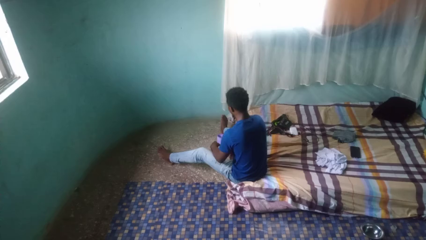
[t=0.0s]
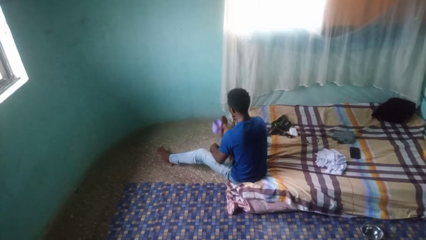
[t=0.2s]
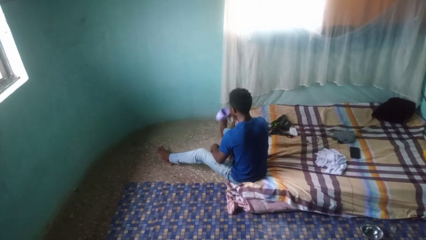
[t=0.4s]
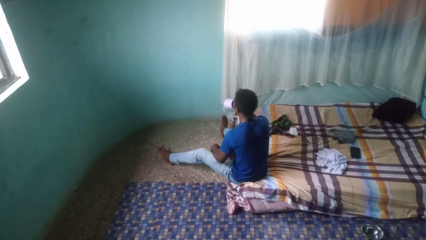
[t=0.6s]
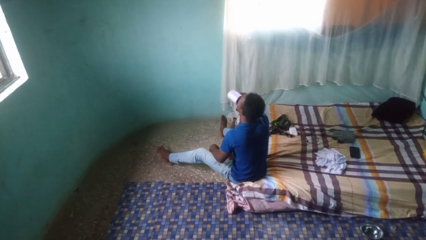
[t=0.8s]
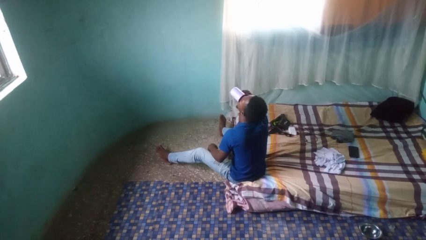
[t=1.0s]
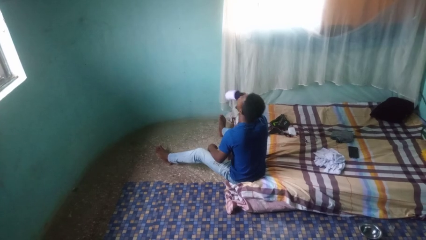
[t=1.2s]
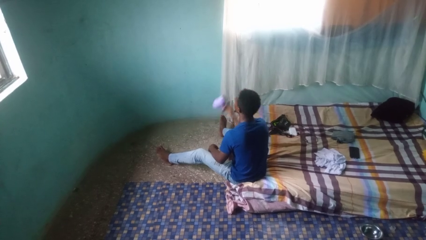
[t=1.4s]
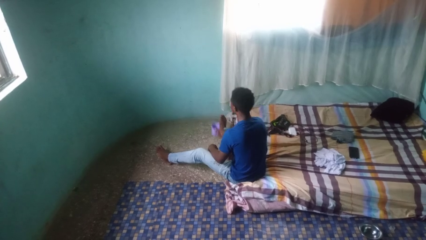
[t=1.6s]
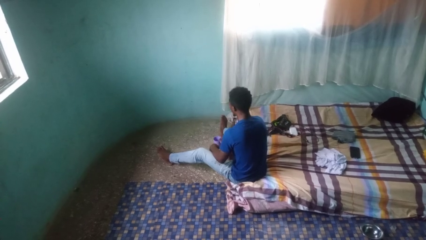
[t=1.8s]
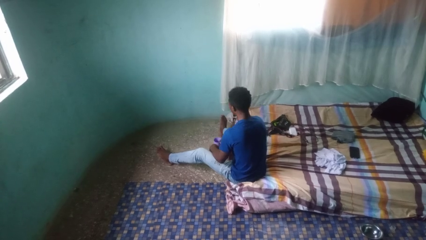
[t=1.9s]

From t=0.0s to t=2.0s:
person drinks from cup

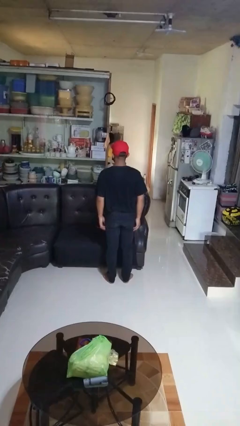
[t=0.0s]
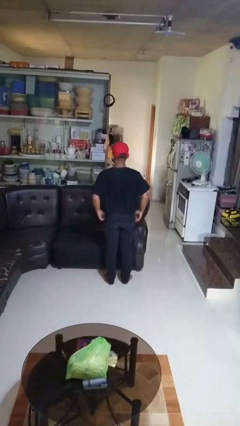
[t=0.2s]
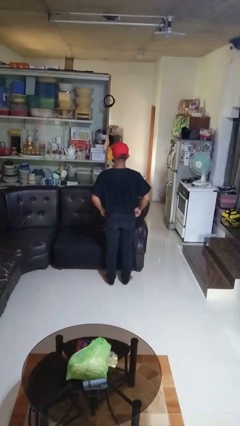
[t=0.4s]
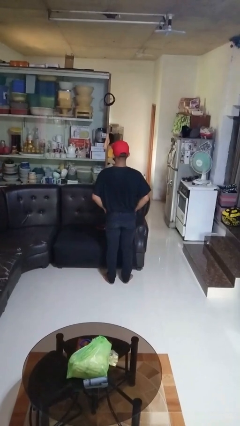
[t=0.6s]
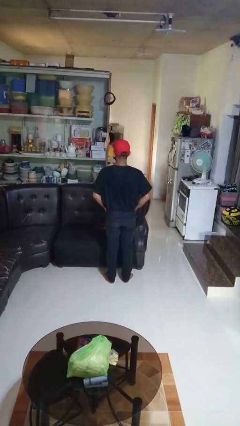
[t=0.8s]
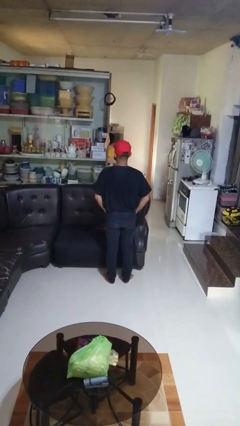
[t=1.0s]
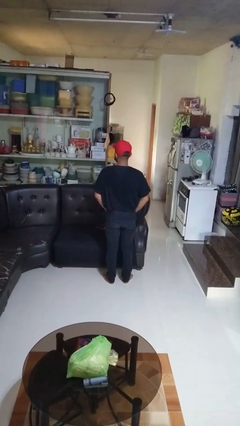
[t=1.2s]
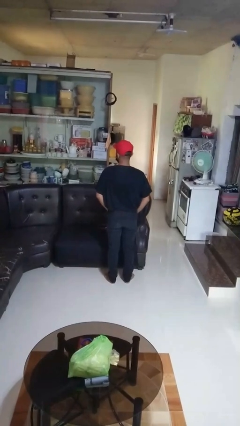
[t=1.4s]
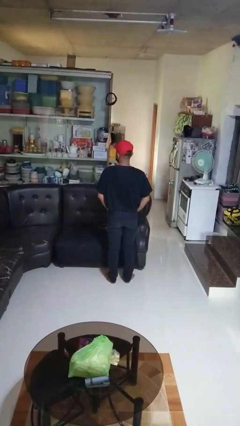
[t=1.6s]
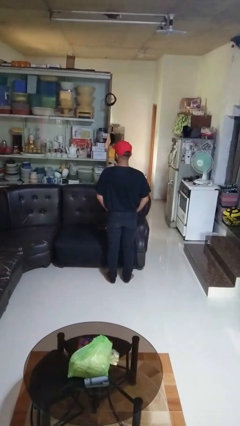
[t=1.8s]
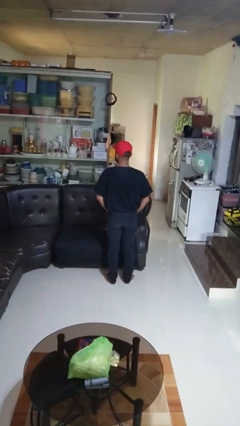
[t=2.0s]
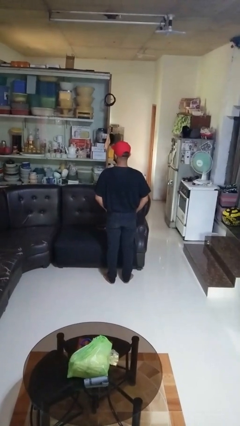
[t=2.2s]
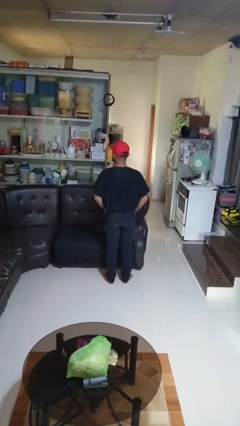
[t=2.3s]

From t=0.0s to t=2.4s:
person puts hands in back pockets

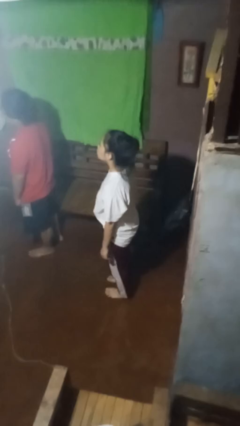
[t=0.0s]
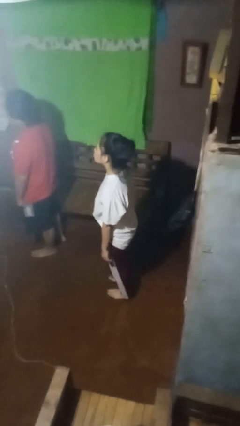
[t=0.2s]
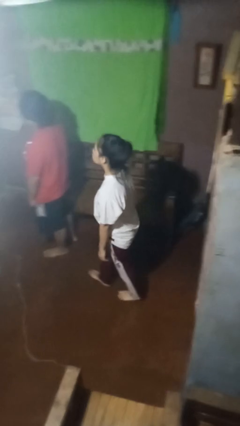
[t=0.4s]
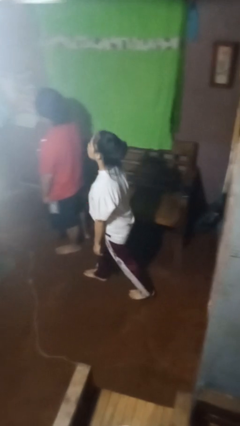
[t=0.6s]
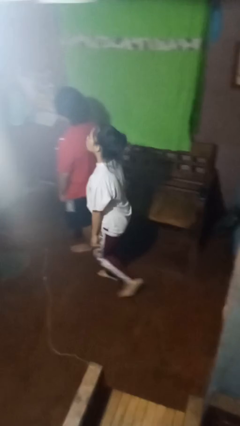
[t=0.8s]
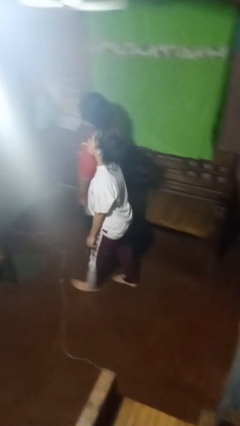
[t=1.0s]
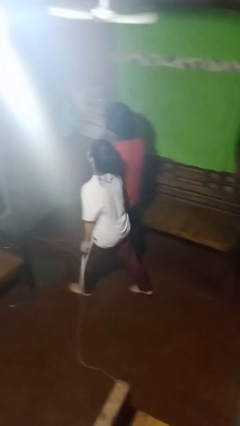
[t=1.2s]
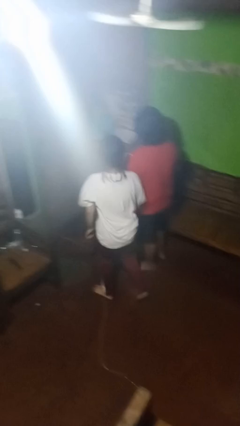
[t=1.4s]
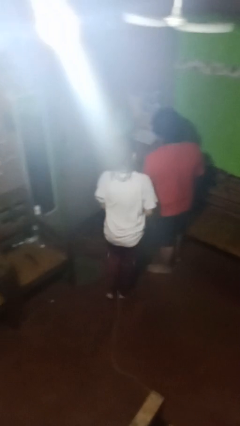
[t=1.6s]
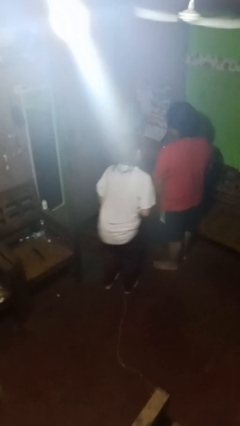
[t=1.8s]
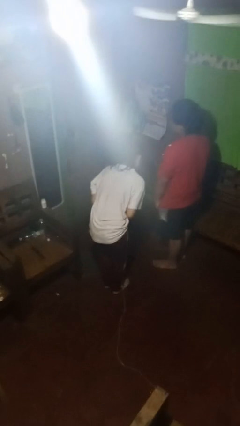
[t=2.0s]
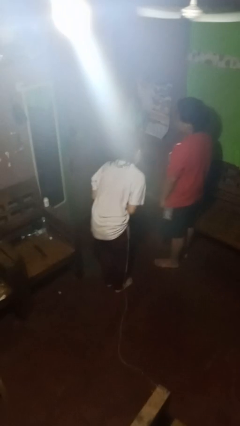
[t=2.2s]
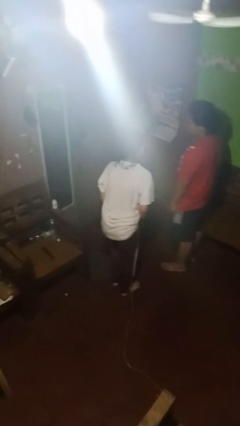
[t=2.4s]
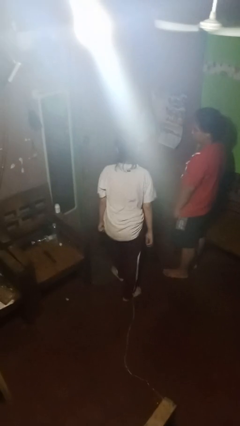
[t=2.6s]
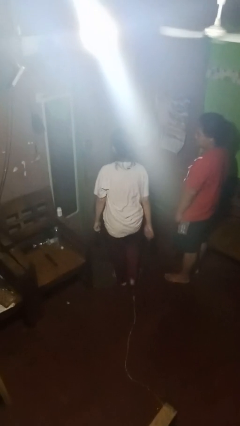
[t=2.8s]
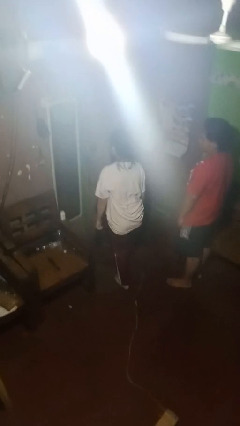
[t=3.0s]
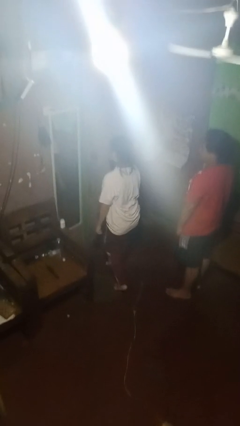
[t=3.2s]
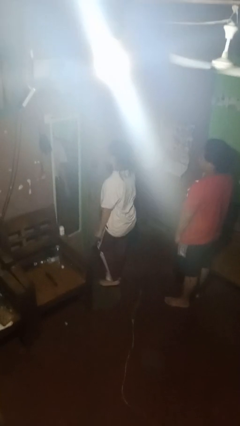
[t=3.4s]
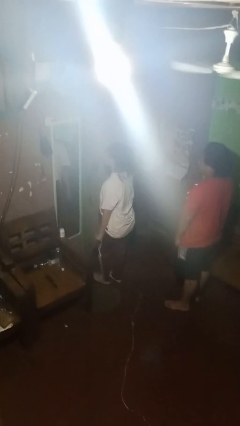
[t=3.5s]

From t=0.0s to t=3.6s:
person bumps into person

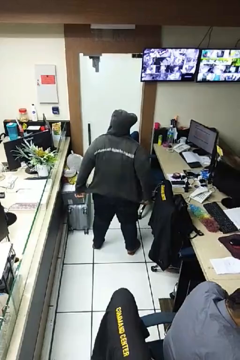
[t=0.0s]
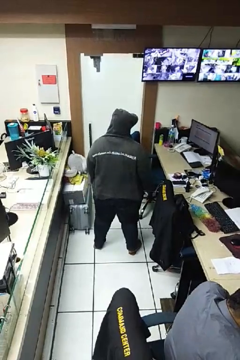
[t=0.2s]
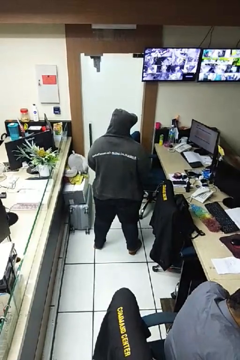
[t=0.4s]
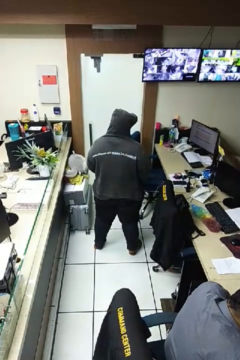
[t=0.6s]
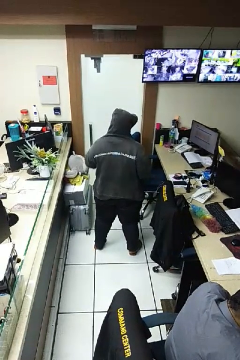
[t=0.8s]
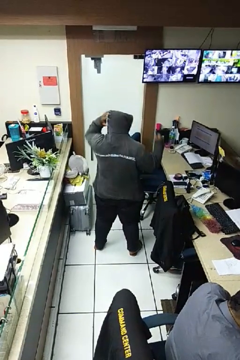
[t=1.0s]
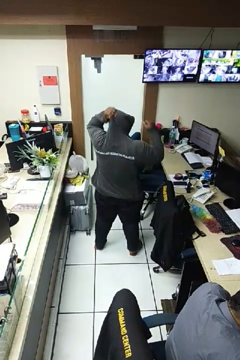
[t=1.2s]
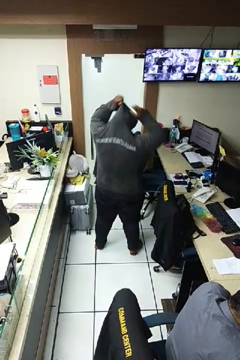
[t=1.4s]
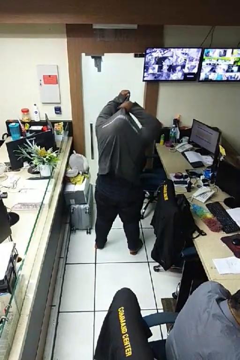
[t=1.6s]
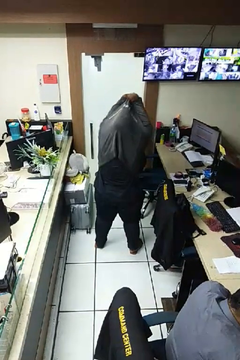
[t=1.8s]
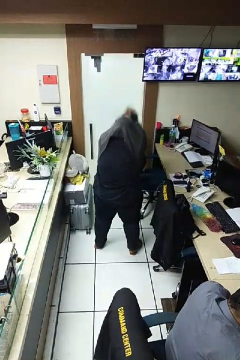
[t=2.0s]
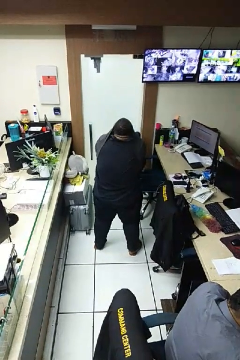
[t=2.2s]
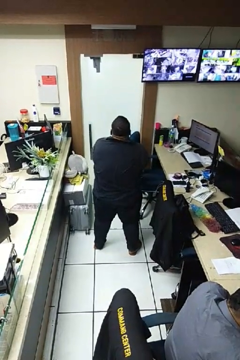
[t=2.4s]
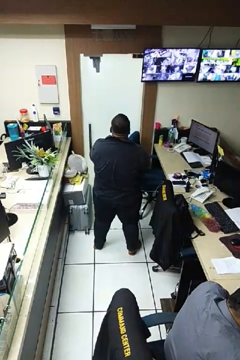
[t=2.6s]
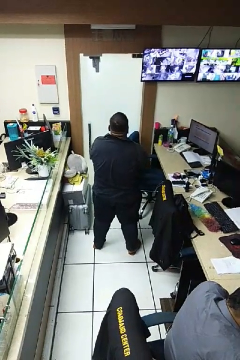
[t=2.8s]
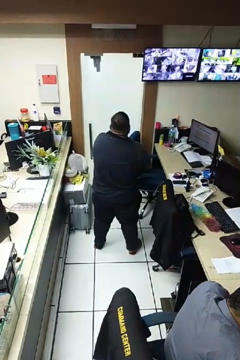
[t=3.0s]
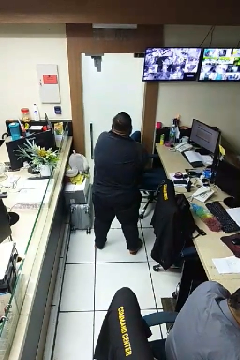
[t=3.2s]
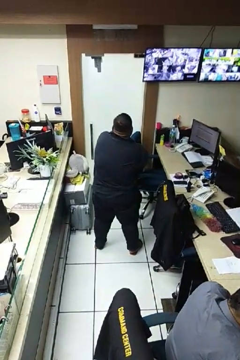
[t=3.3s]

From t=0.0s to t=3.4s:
person takes off hoodie

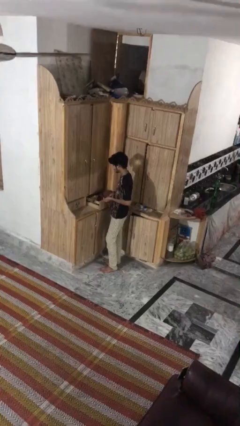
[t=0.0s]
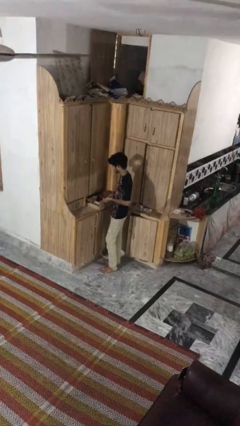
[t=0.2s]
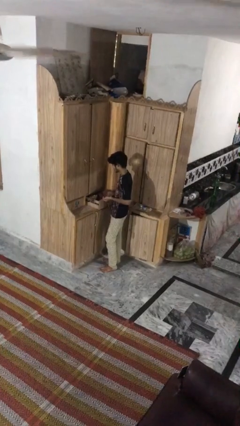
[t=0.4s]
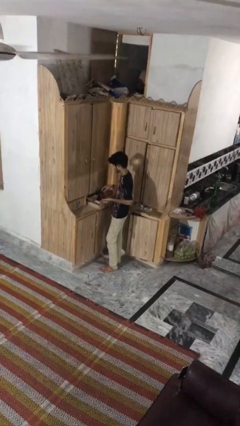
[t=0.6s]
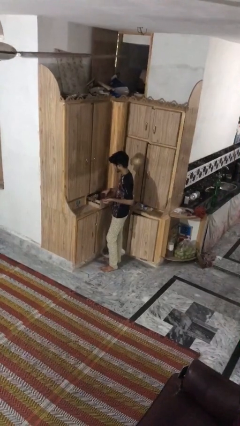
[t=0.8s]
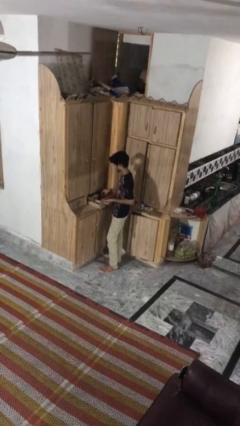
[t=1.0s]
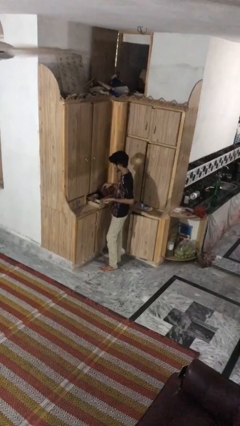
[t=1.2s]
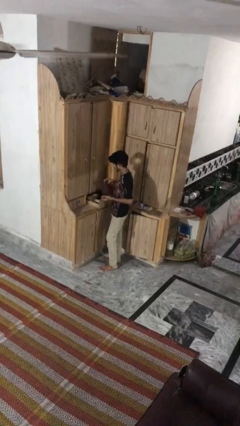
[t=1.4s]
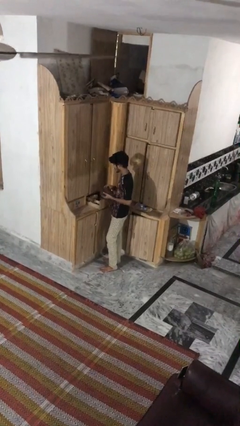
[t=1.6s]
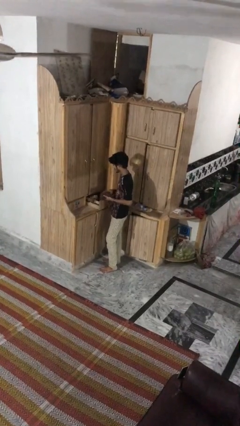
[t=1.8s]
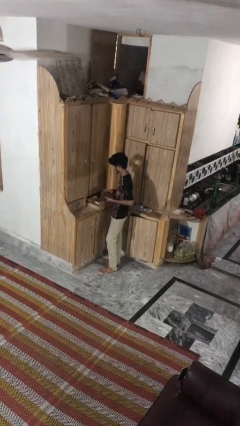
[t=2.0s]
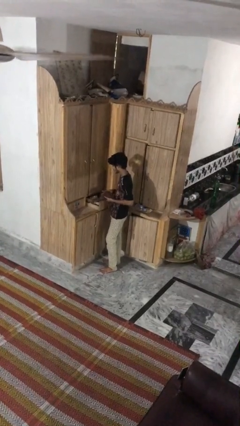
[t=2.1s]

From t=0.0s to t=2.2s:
person takes clothes from dresser

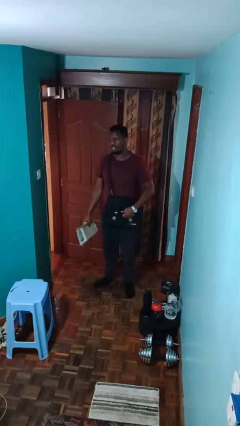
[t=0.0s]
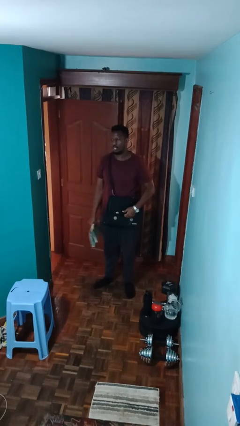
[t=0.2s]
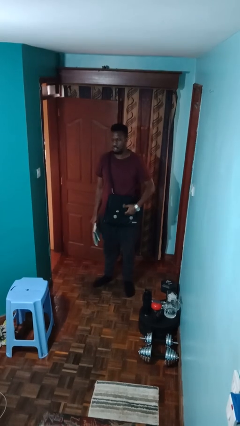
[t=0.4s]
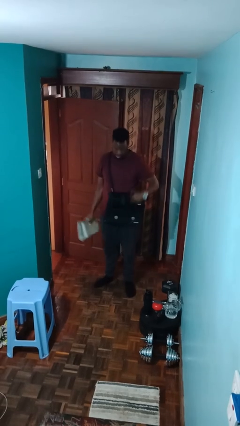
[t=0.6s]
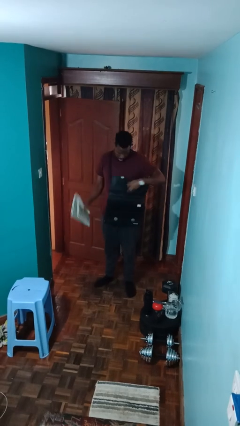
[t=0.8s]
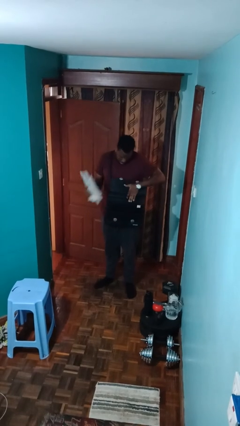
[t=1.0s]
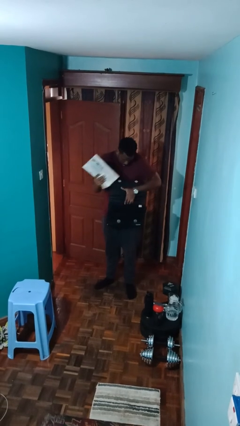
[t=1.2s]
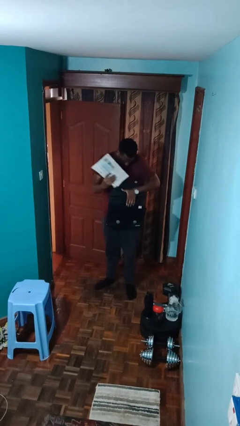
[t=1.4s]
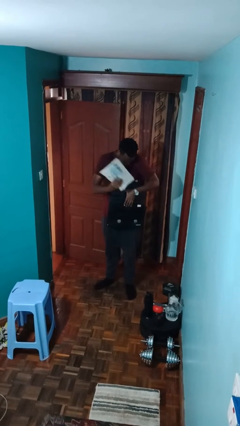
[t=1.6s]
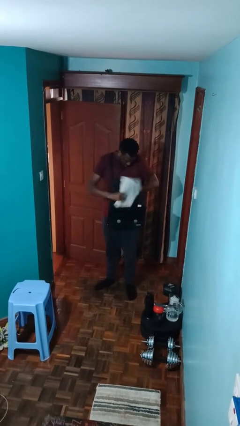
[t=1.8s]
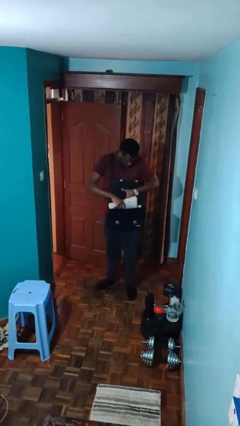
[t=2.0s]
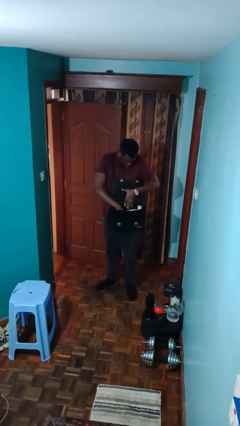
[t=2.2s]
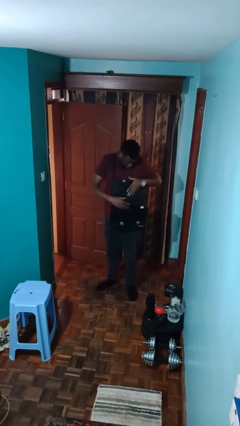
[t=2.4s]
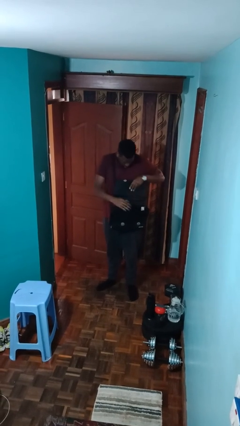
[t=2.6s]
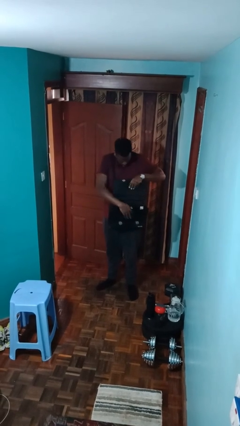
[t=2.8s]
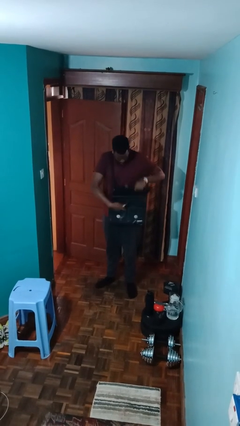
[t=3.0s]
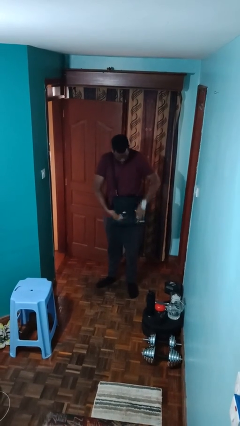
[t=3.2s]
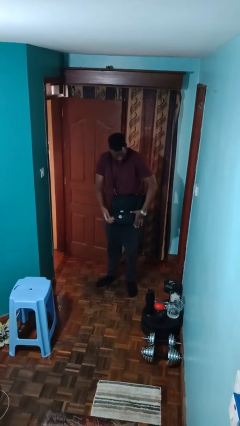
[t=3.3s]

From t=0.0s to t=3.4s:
person puts object into purse

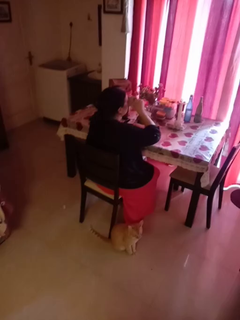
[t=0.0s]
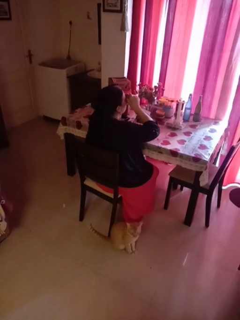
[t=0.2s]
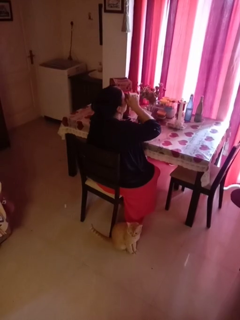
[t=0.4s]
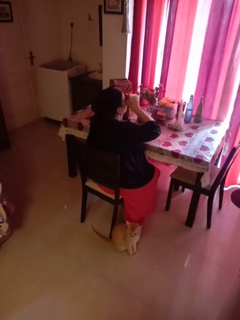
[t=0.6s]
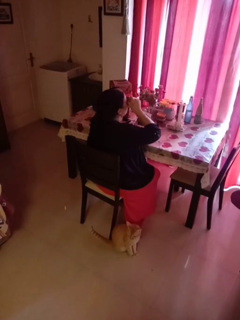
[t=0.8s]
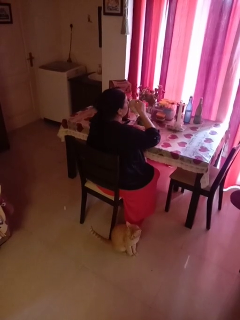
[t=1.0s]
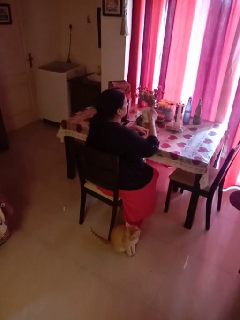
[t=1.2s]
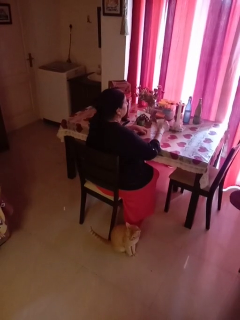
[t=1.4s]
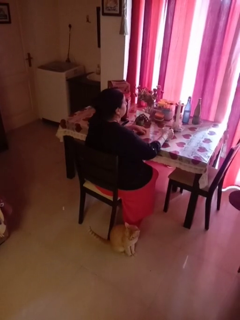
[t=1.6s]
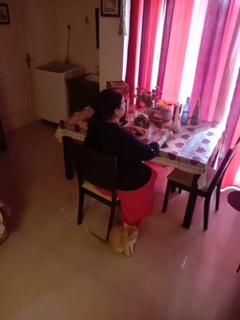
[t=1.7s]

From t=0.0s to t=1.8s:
person drinks from mug
